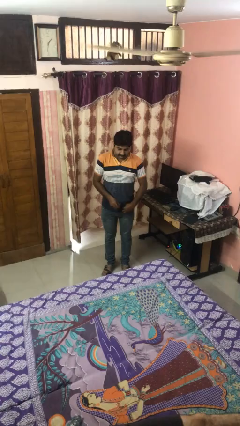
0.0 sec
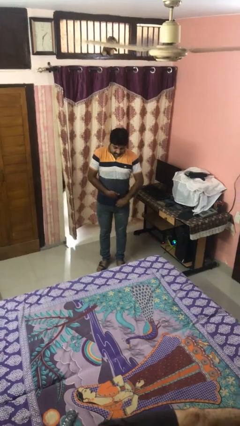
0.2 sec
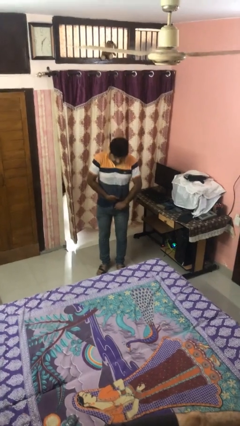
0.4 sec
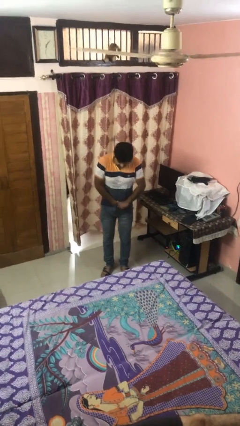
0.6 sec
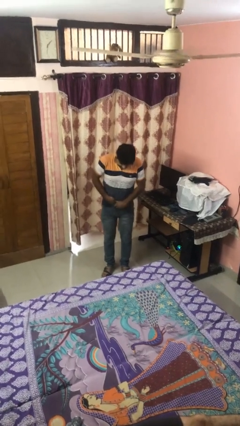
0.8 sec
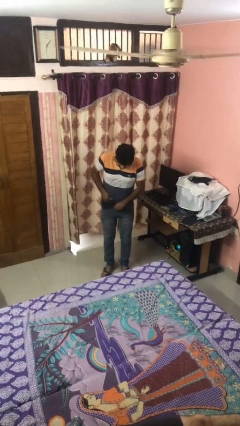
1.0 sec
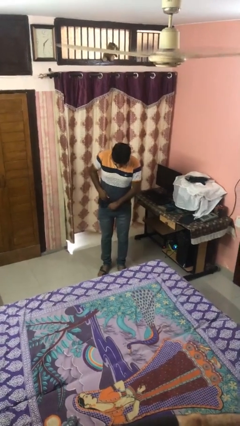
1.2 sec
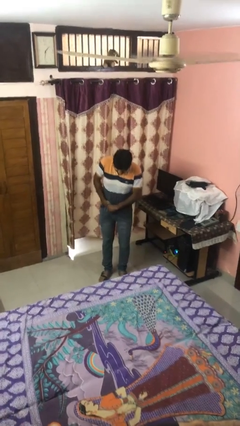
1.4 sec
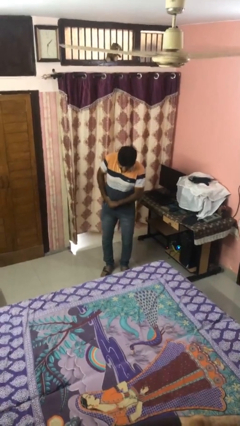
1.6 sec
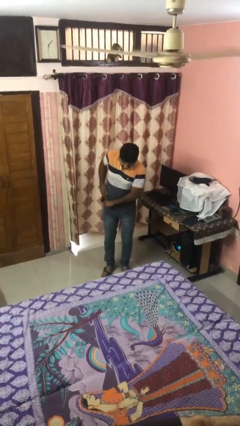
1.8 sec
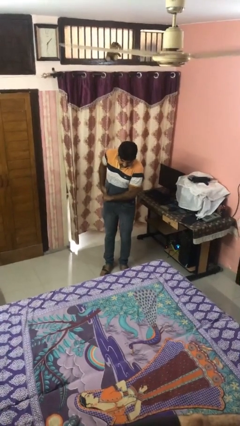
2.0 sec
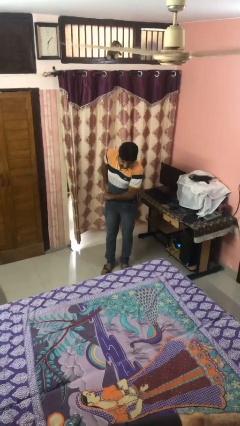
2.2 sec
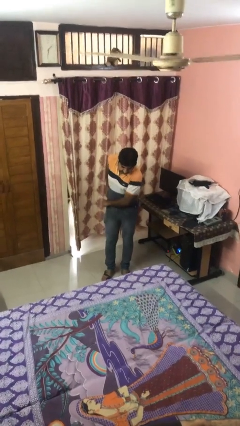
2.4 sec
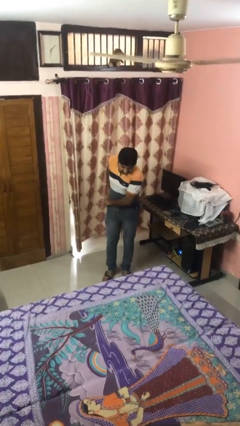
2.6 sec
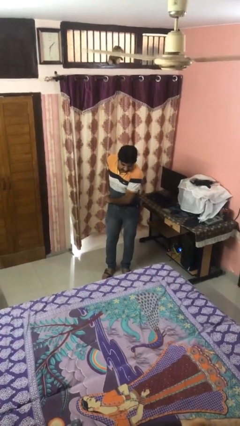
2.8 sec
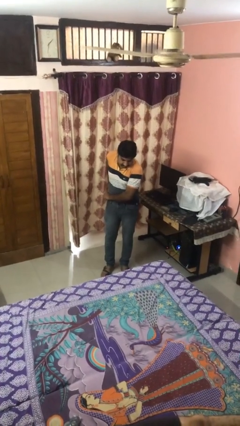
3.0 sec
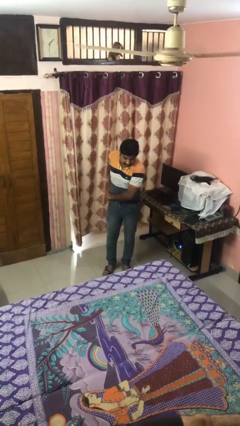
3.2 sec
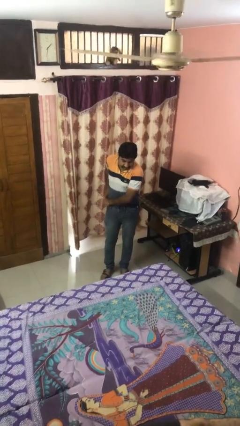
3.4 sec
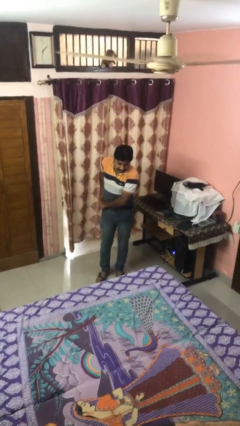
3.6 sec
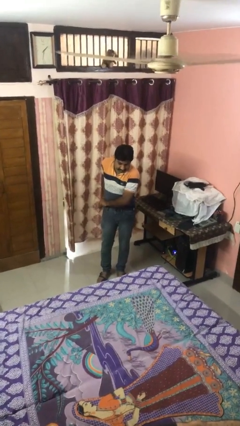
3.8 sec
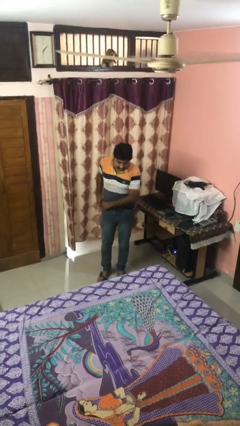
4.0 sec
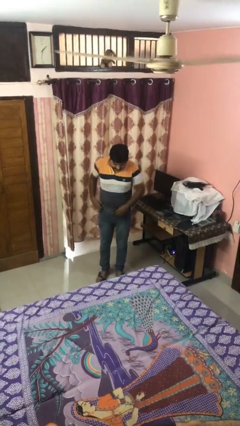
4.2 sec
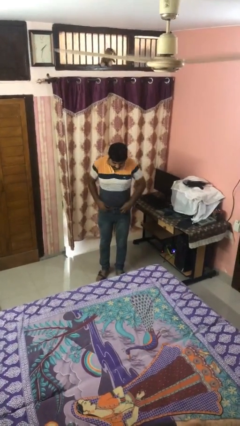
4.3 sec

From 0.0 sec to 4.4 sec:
person tucks in shirt

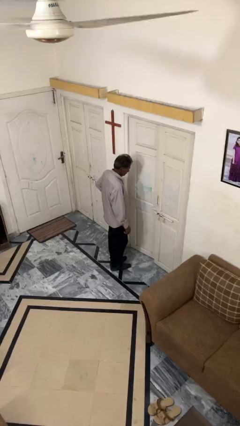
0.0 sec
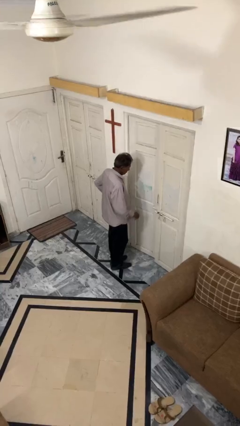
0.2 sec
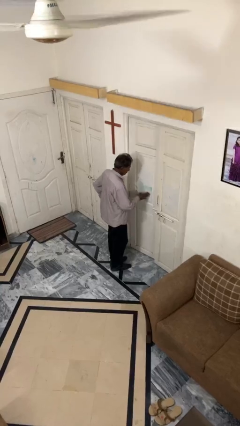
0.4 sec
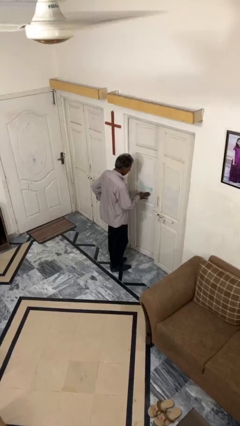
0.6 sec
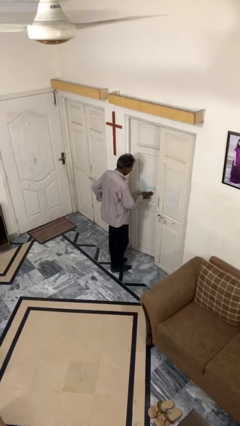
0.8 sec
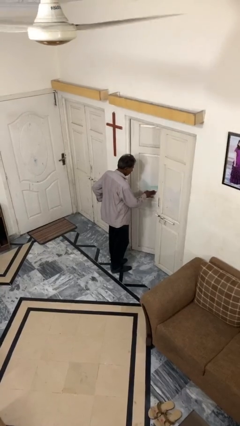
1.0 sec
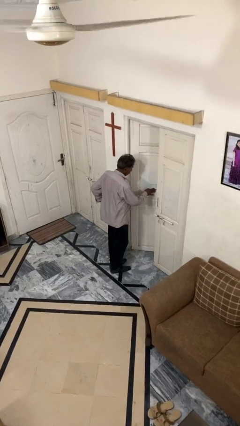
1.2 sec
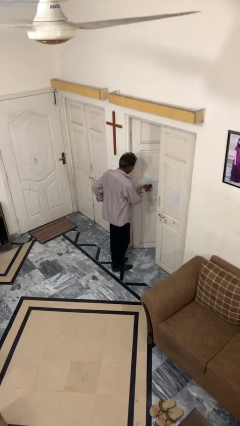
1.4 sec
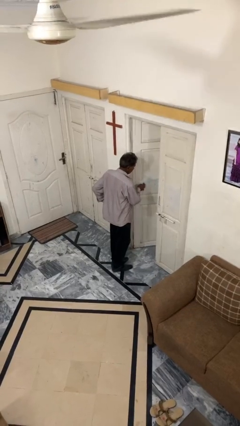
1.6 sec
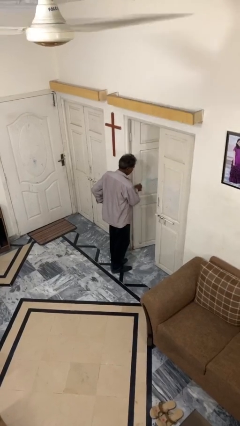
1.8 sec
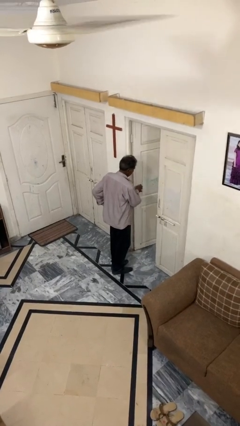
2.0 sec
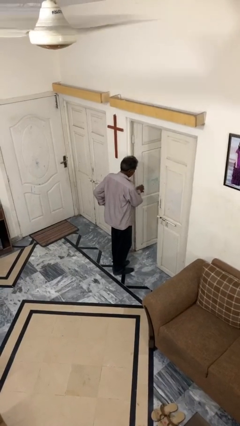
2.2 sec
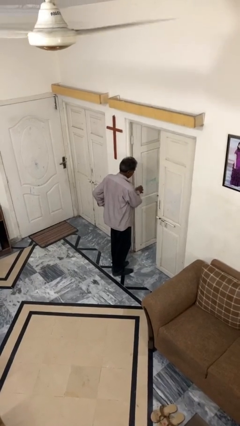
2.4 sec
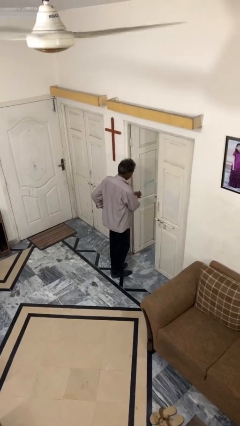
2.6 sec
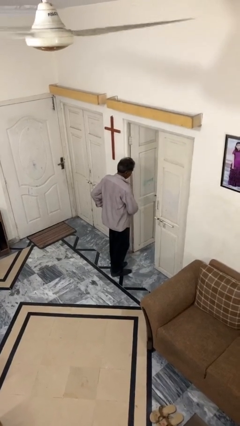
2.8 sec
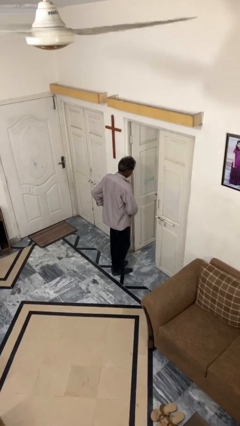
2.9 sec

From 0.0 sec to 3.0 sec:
person opens facility door

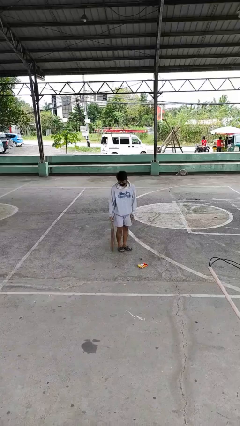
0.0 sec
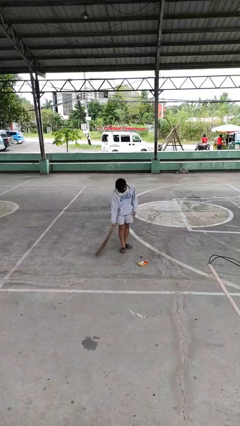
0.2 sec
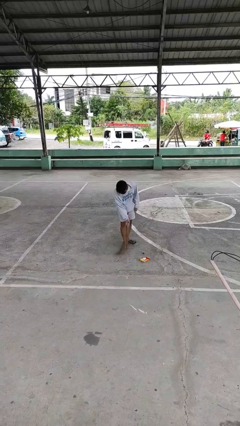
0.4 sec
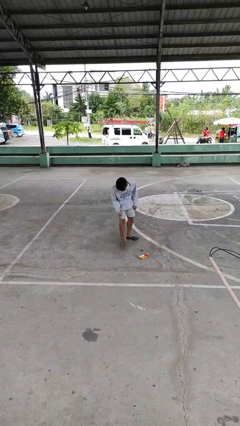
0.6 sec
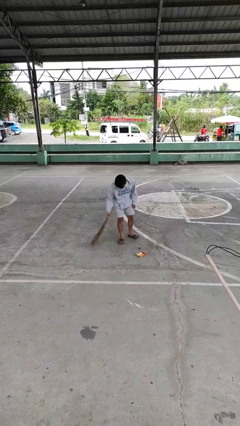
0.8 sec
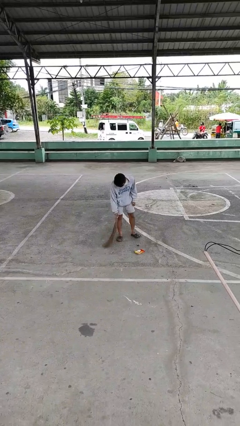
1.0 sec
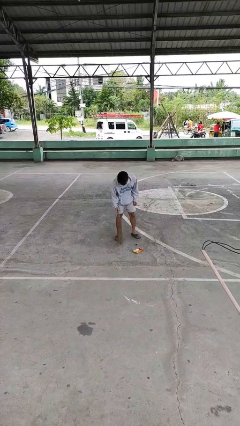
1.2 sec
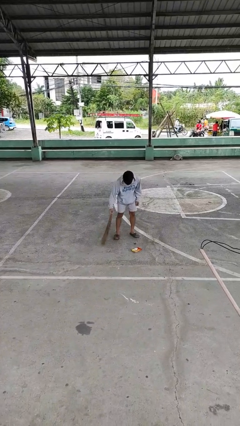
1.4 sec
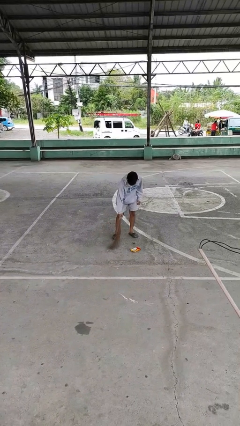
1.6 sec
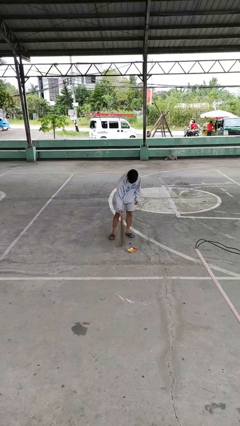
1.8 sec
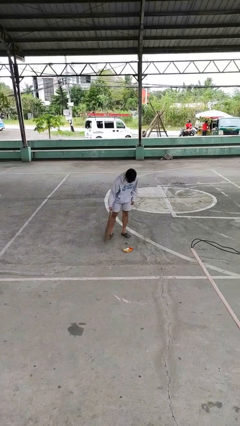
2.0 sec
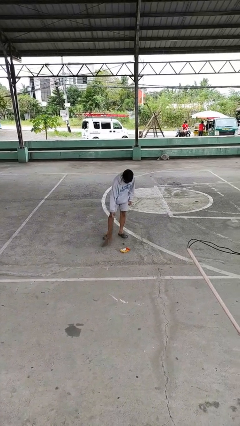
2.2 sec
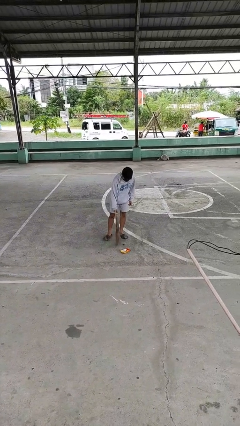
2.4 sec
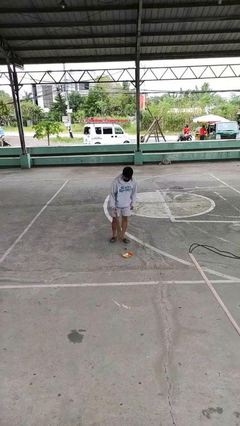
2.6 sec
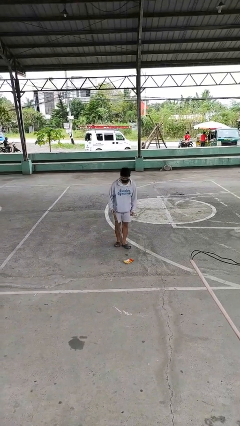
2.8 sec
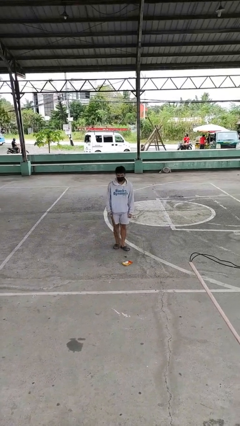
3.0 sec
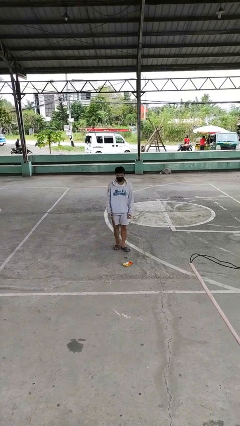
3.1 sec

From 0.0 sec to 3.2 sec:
person sweeps floor

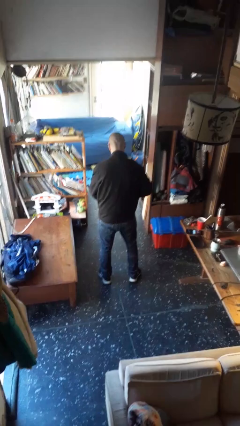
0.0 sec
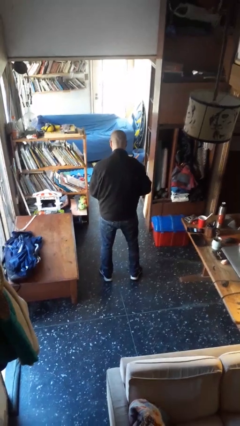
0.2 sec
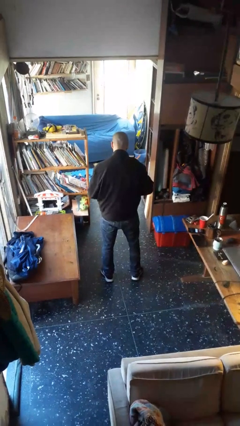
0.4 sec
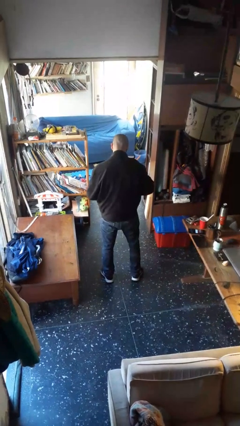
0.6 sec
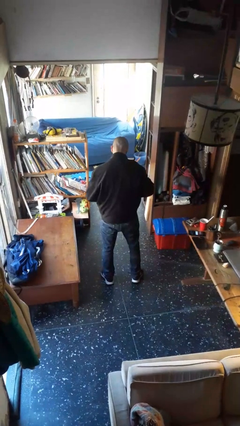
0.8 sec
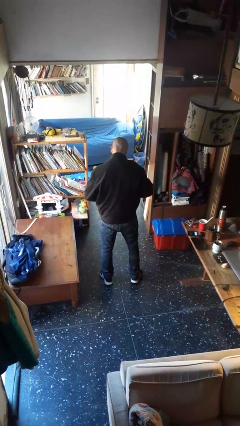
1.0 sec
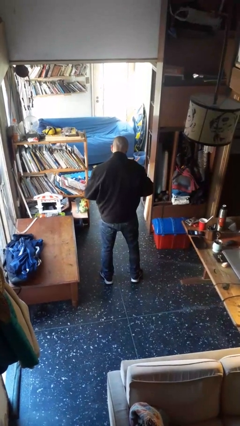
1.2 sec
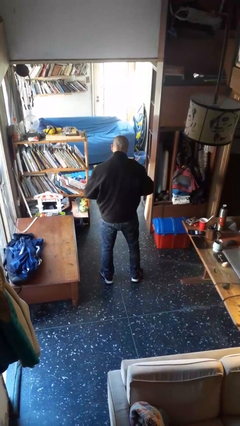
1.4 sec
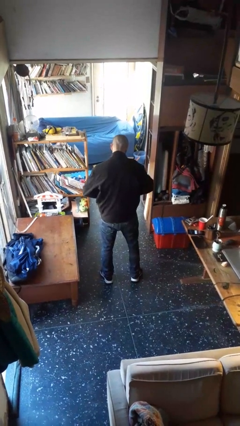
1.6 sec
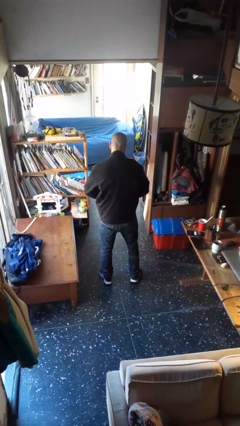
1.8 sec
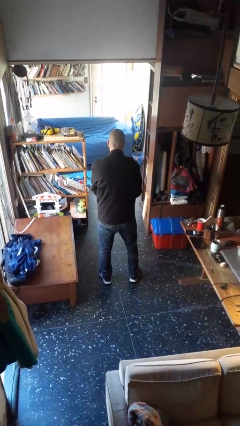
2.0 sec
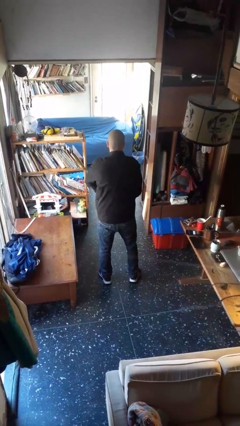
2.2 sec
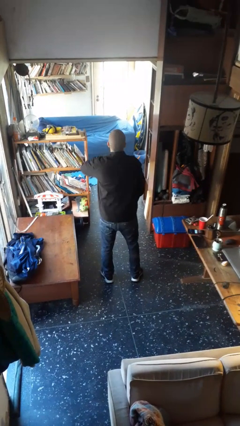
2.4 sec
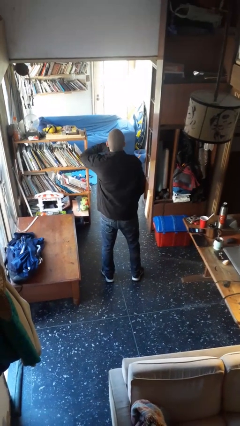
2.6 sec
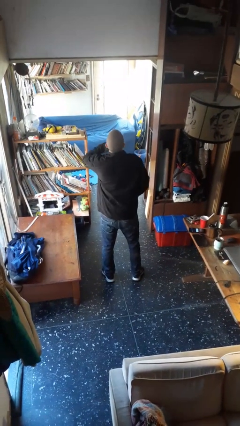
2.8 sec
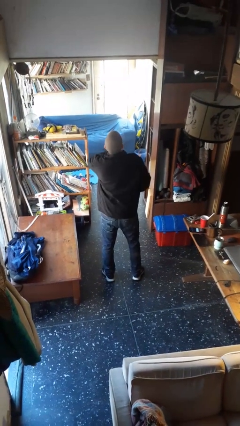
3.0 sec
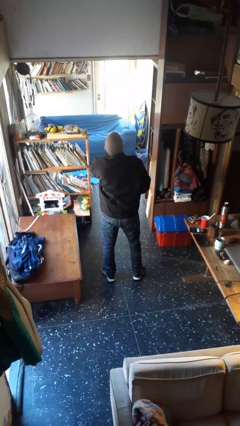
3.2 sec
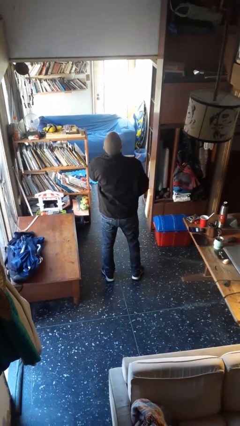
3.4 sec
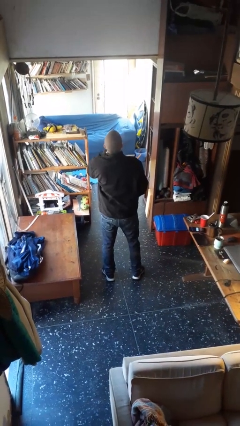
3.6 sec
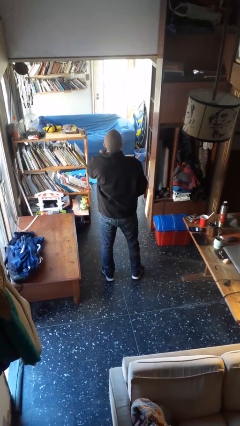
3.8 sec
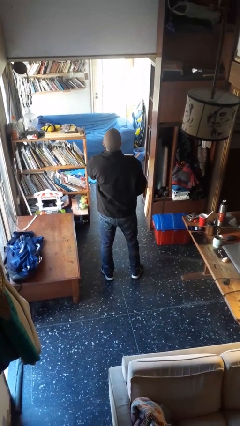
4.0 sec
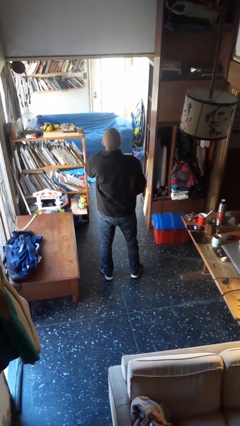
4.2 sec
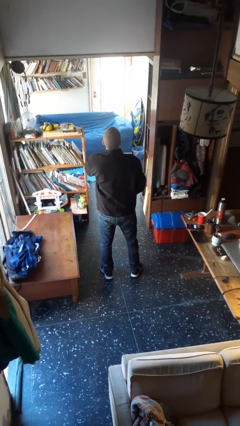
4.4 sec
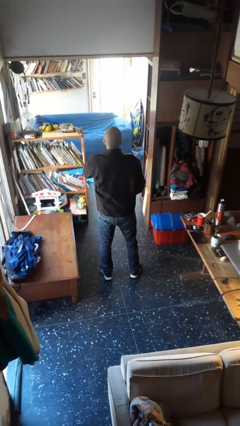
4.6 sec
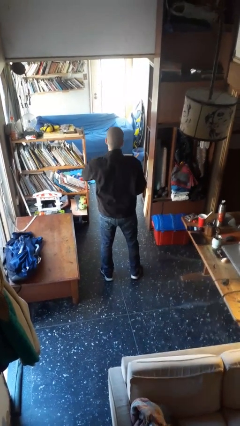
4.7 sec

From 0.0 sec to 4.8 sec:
person zips up jacket

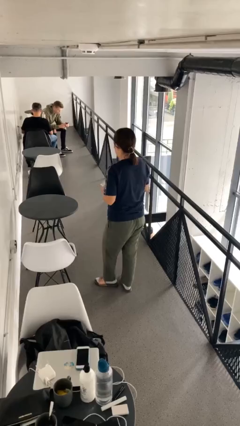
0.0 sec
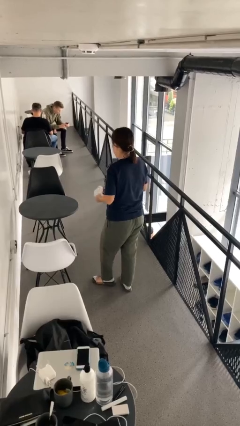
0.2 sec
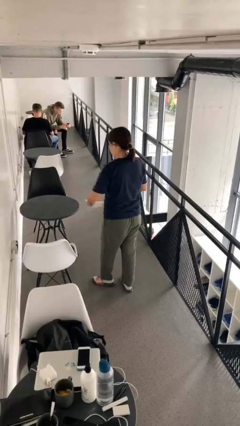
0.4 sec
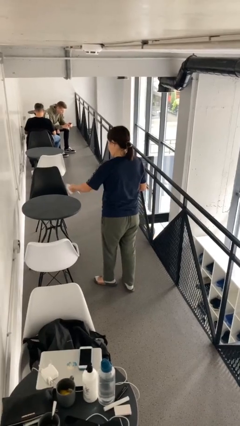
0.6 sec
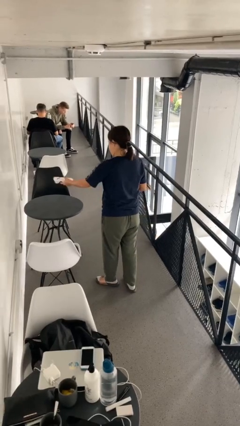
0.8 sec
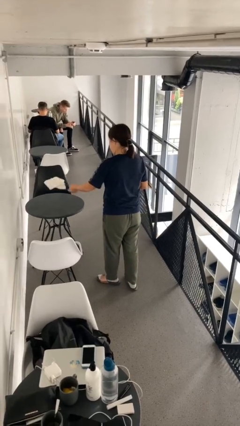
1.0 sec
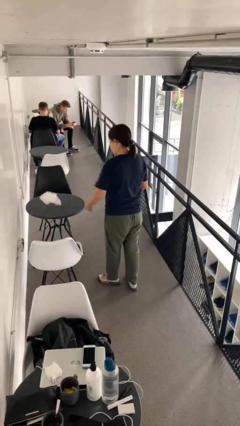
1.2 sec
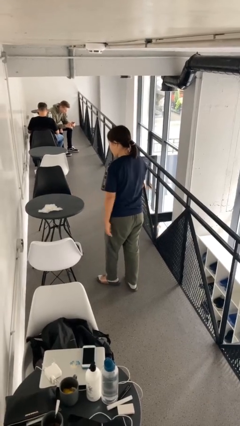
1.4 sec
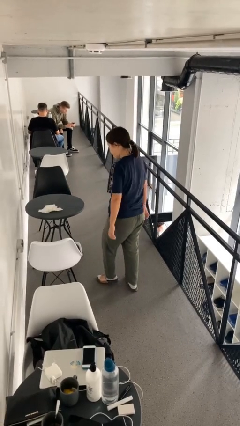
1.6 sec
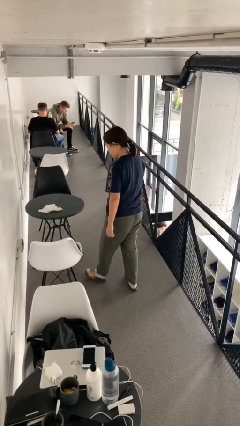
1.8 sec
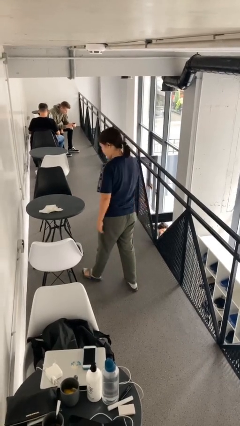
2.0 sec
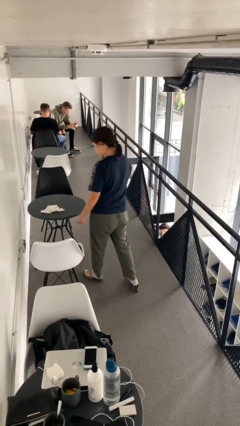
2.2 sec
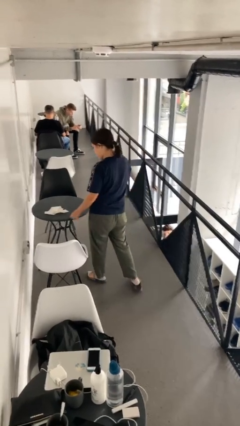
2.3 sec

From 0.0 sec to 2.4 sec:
person throws object on table
